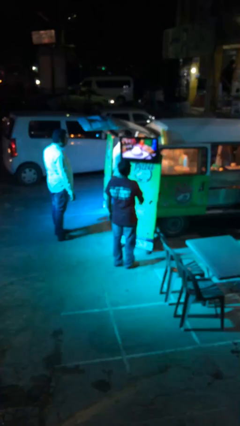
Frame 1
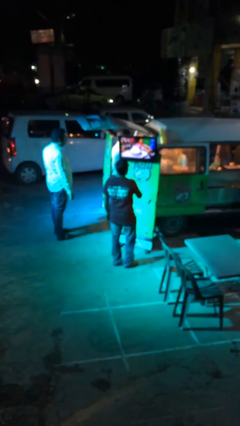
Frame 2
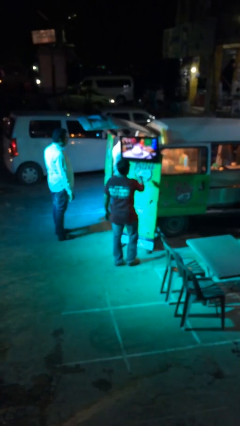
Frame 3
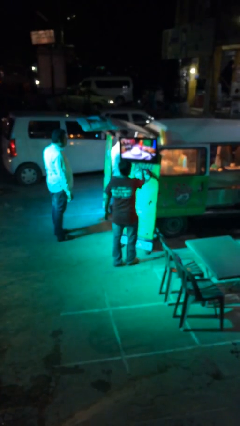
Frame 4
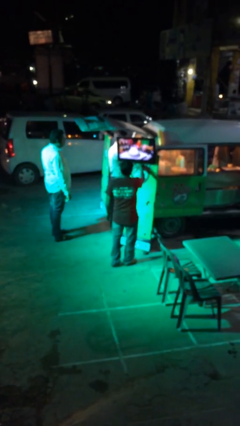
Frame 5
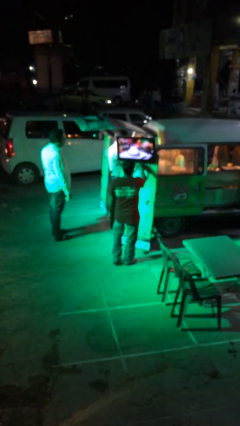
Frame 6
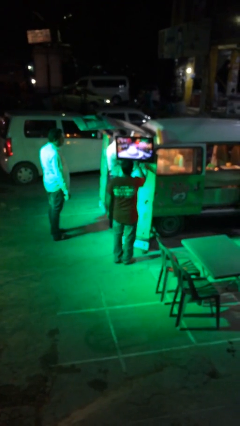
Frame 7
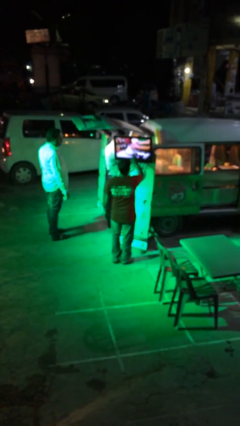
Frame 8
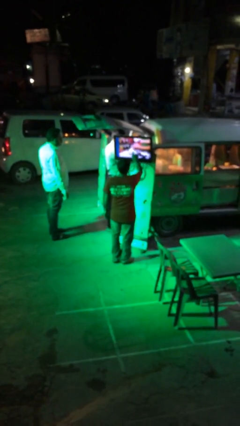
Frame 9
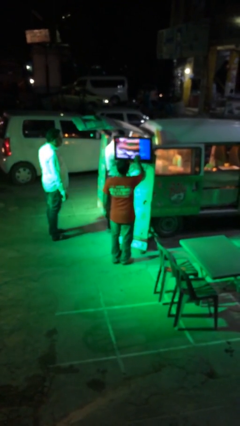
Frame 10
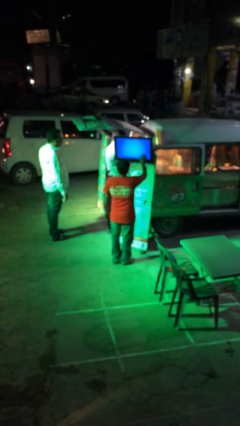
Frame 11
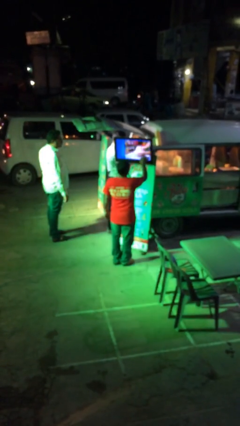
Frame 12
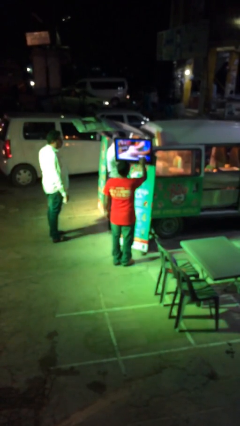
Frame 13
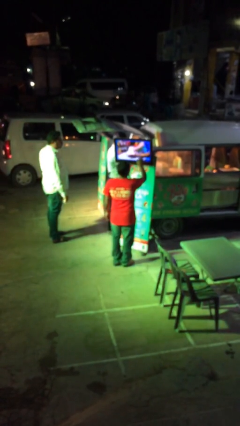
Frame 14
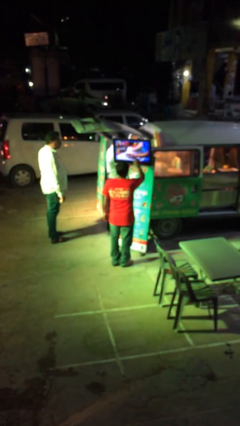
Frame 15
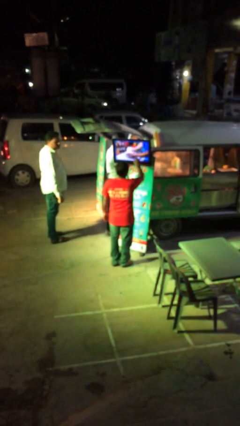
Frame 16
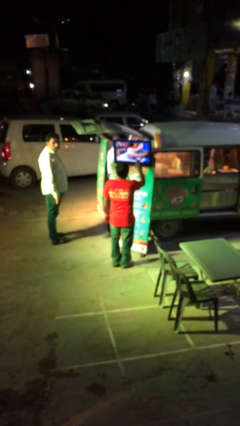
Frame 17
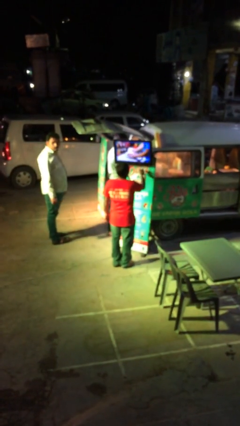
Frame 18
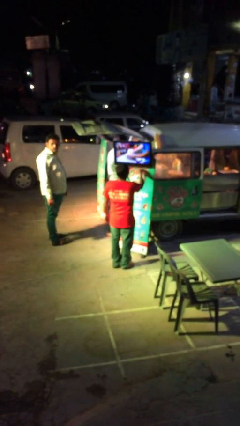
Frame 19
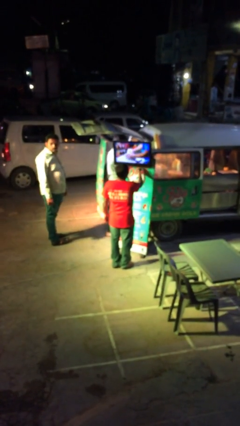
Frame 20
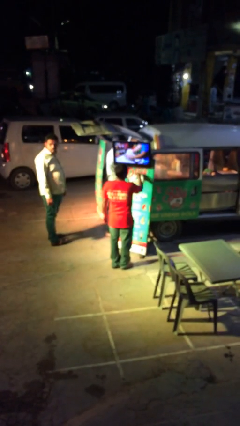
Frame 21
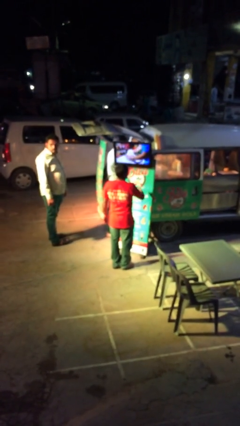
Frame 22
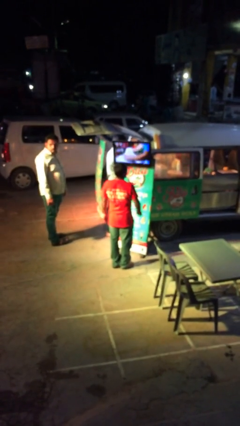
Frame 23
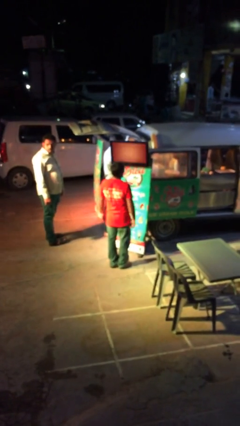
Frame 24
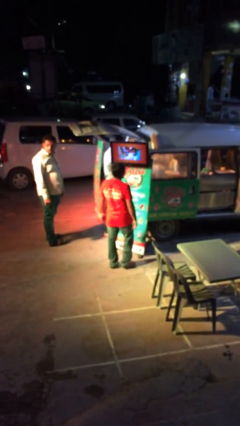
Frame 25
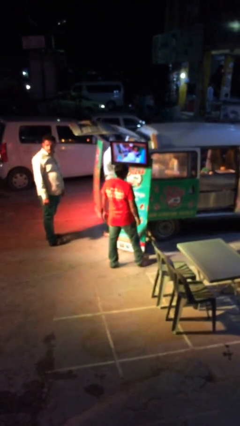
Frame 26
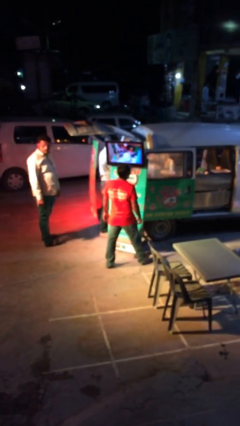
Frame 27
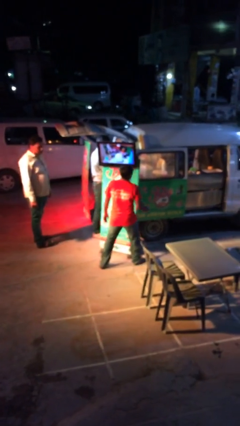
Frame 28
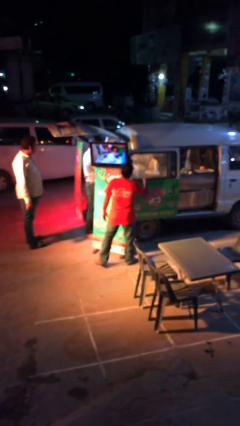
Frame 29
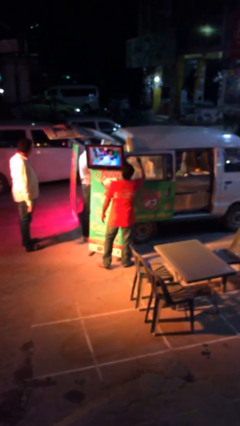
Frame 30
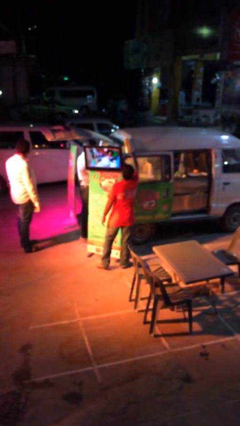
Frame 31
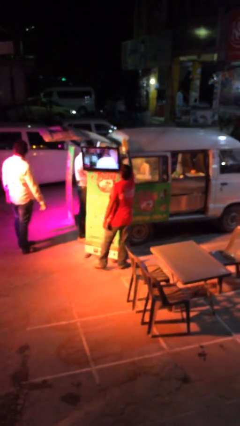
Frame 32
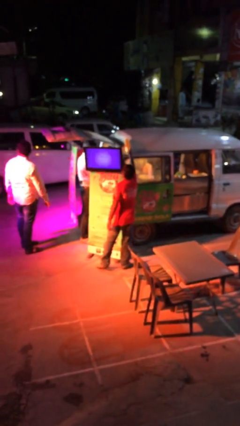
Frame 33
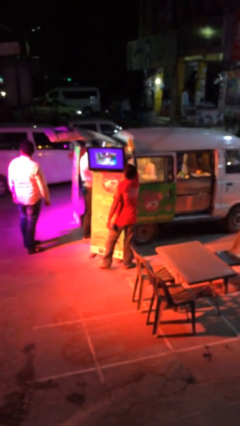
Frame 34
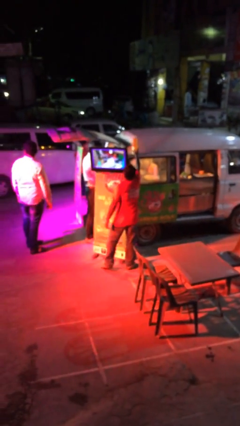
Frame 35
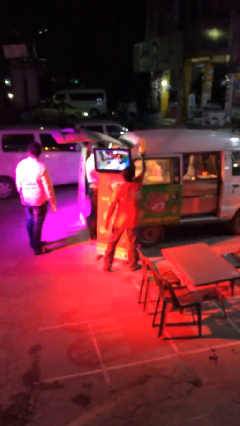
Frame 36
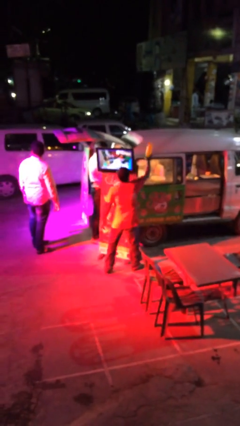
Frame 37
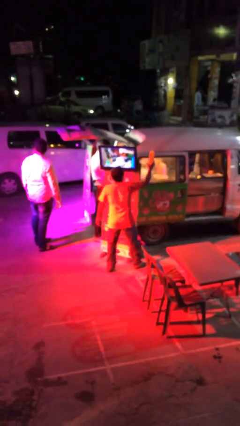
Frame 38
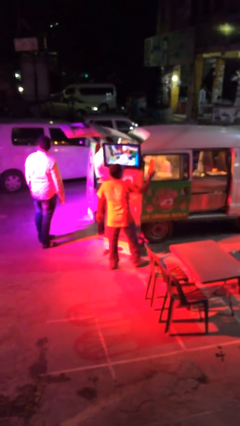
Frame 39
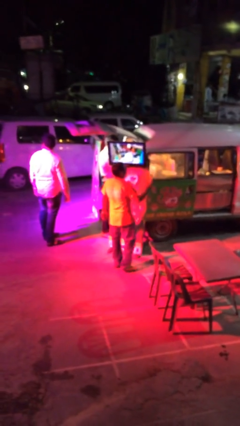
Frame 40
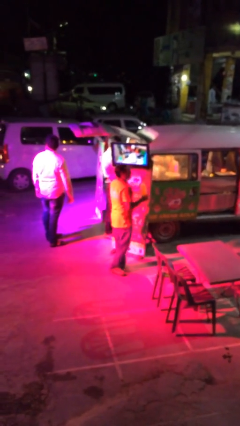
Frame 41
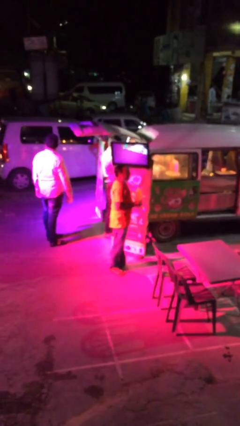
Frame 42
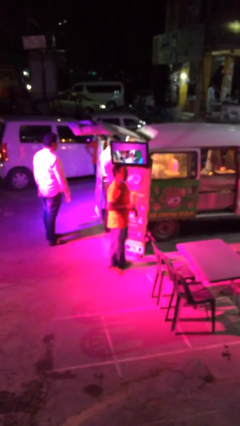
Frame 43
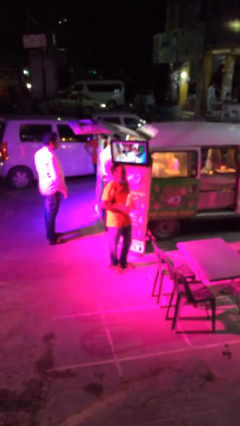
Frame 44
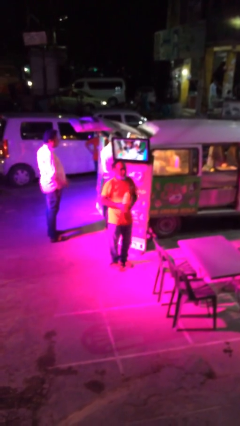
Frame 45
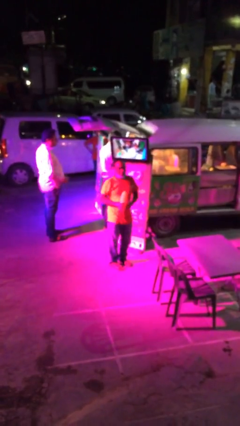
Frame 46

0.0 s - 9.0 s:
person purchases from machine

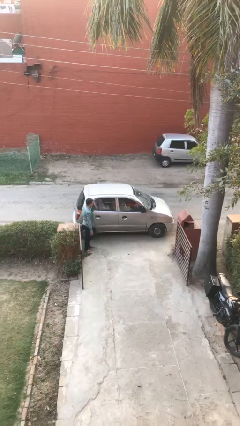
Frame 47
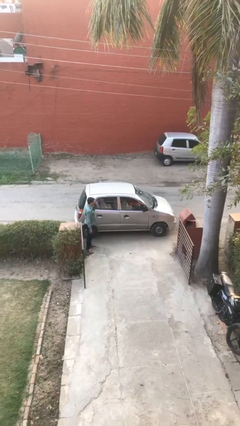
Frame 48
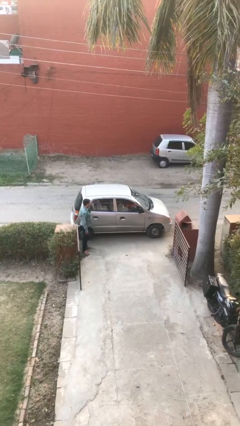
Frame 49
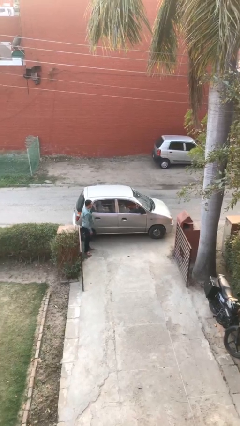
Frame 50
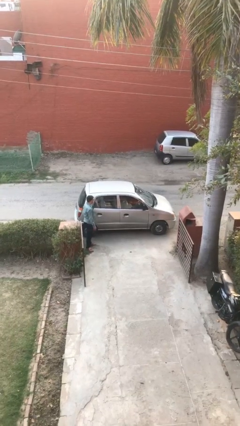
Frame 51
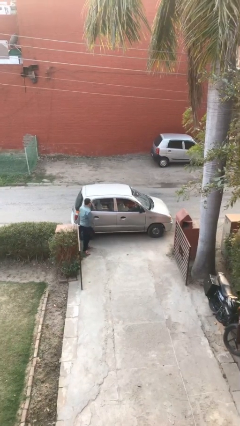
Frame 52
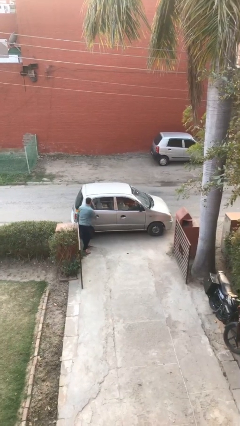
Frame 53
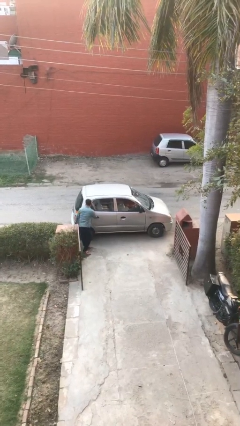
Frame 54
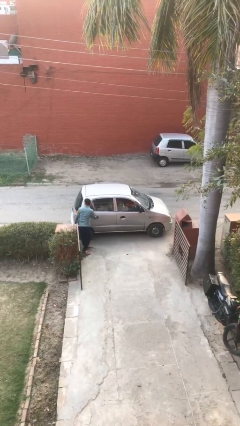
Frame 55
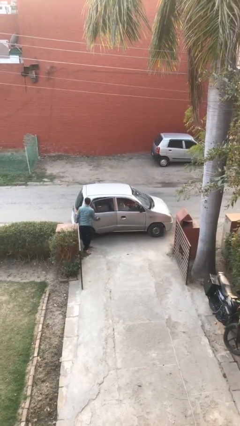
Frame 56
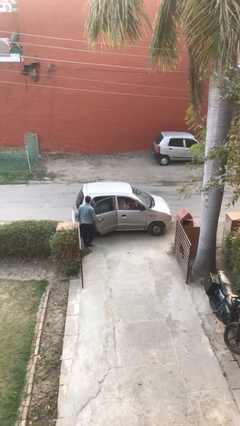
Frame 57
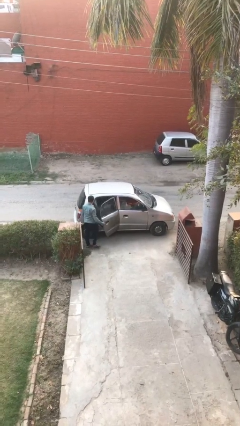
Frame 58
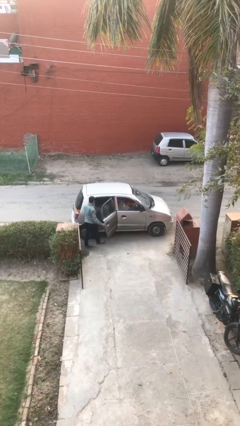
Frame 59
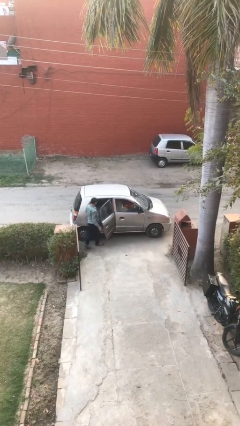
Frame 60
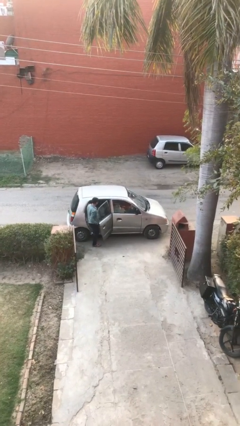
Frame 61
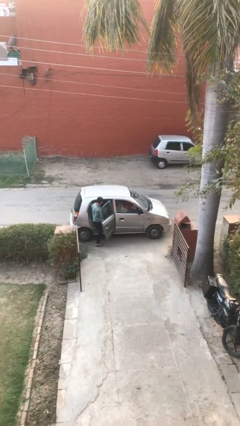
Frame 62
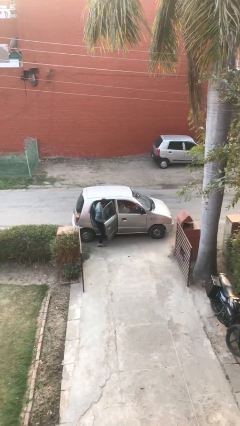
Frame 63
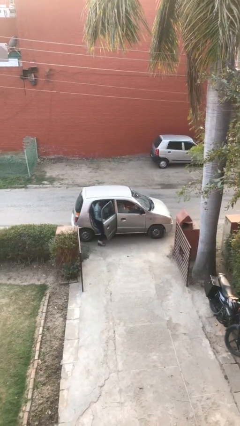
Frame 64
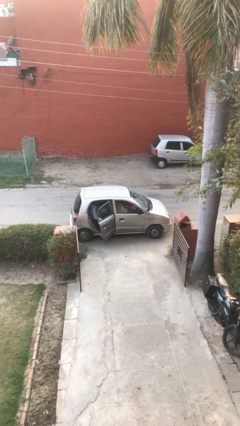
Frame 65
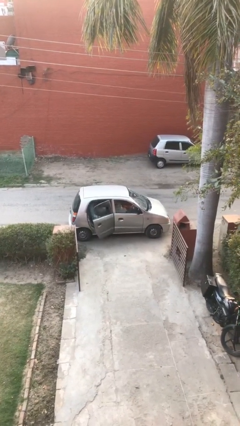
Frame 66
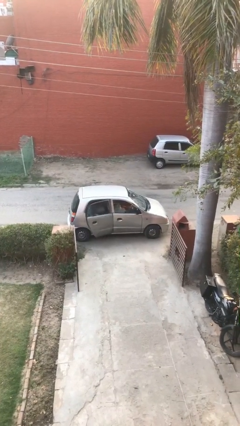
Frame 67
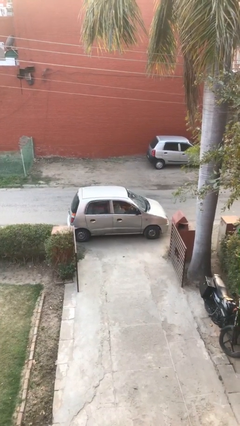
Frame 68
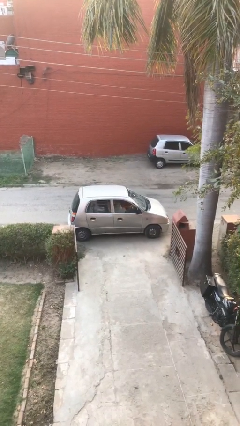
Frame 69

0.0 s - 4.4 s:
car picks up person

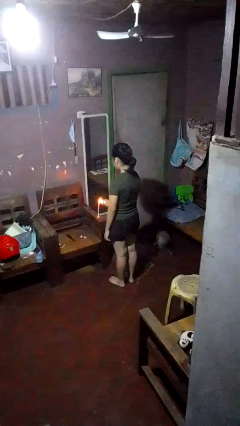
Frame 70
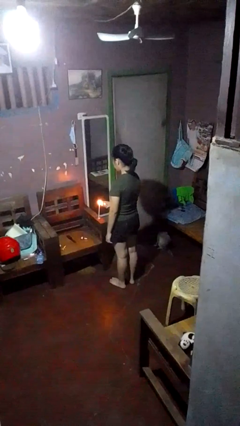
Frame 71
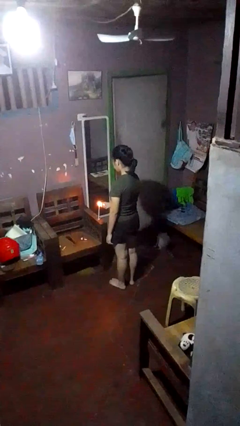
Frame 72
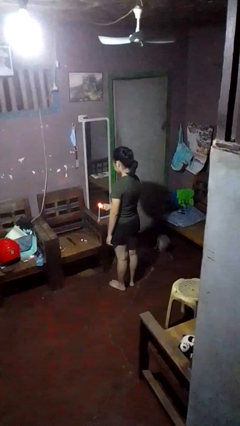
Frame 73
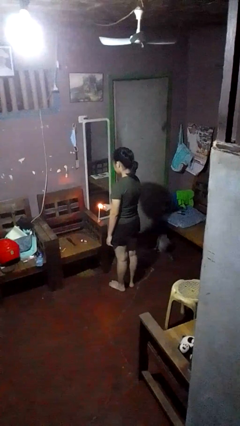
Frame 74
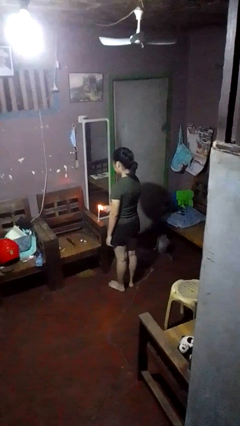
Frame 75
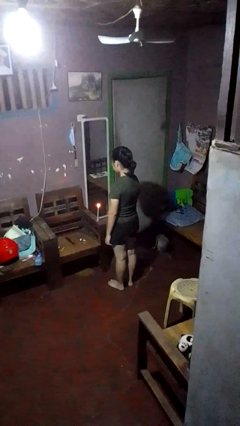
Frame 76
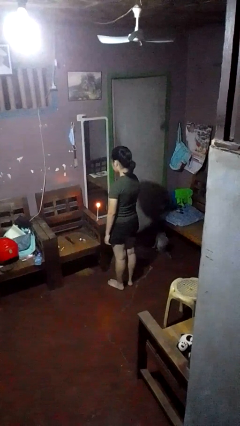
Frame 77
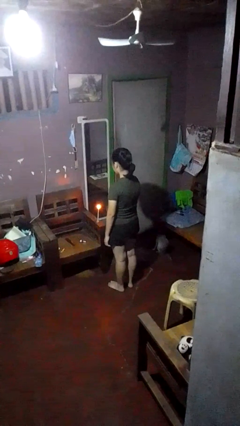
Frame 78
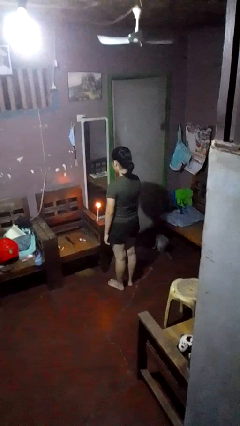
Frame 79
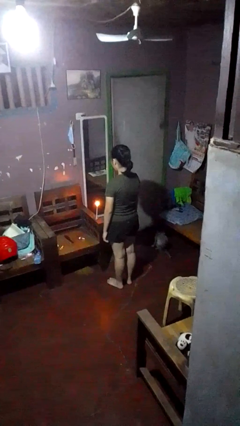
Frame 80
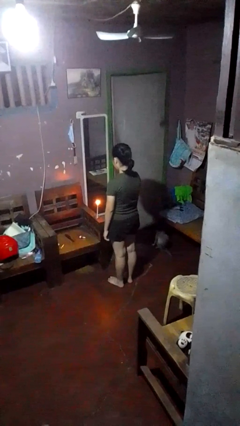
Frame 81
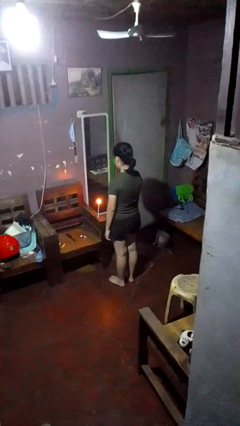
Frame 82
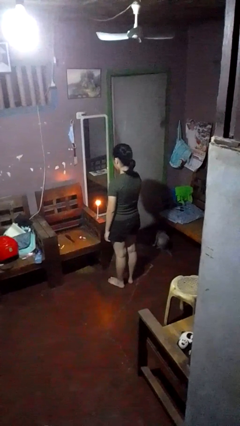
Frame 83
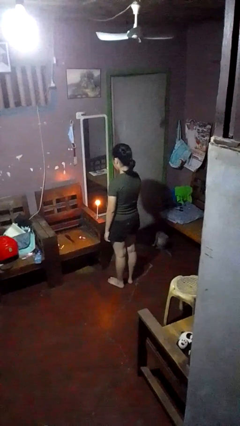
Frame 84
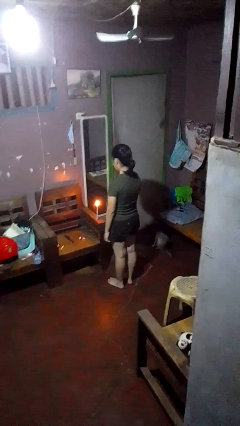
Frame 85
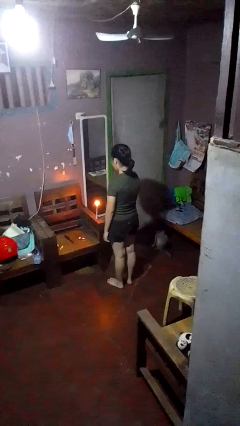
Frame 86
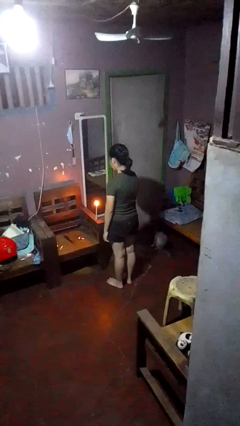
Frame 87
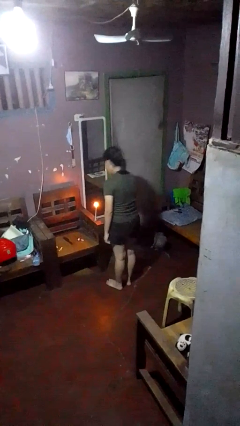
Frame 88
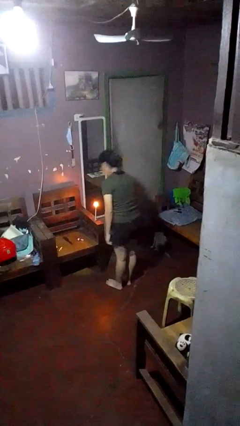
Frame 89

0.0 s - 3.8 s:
person lights candle

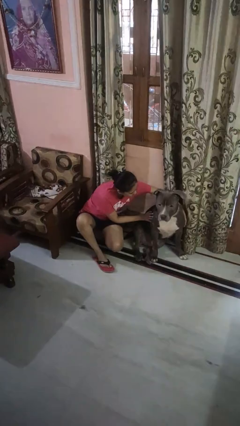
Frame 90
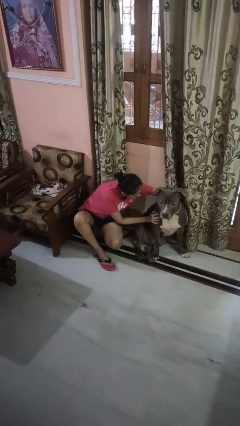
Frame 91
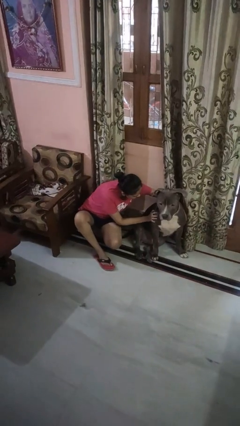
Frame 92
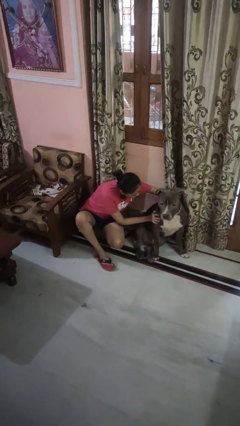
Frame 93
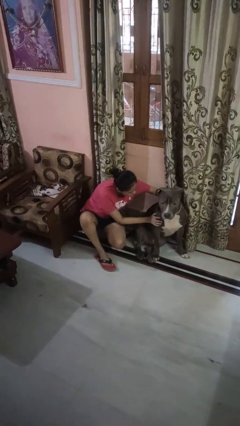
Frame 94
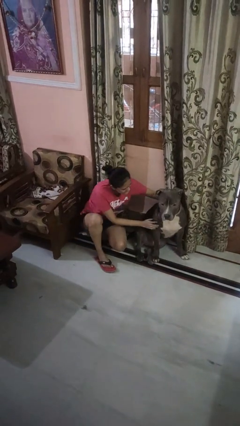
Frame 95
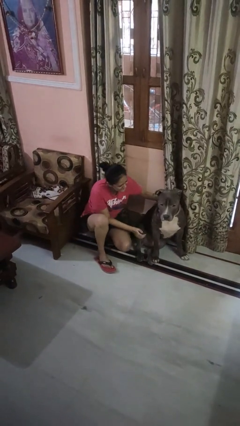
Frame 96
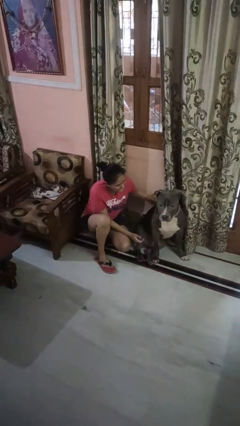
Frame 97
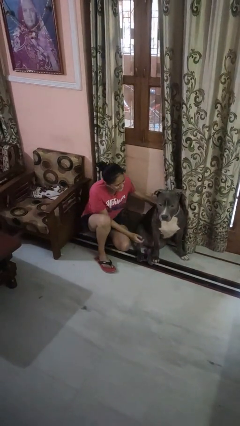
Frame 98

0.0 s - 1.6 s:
person hugs dog
